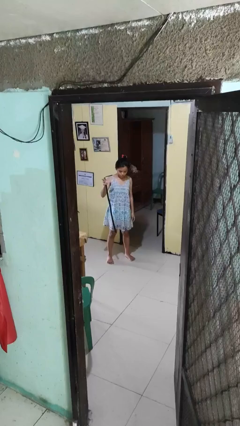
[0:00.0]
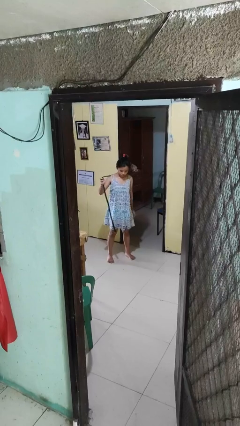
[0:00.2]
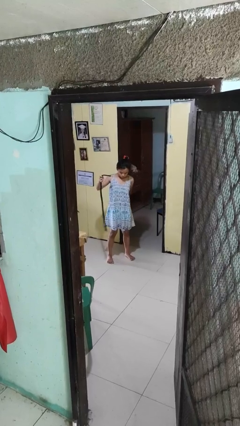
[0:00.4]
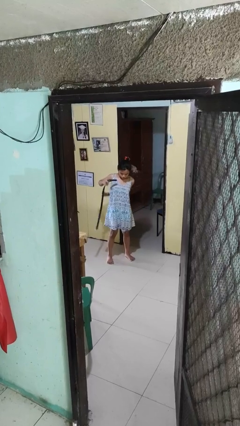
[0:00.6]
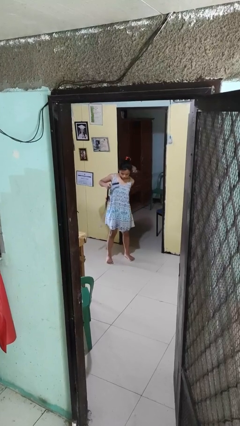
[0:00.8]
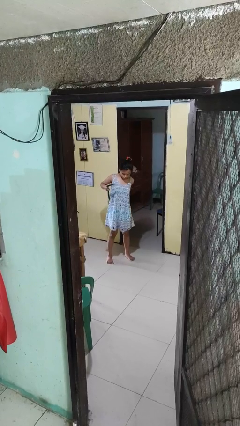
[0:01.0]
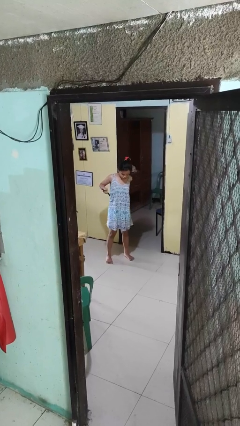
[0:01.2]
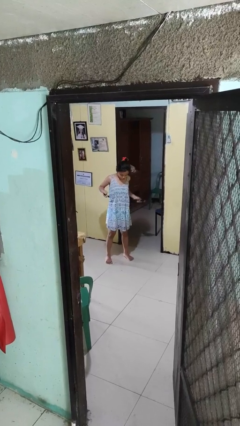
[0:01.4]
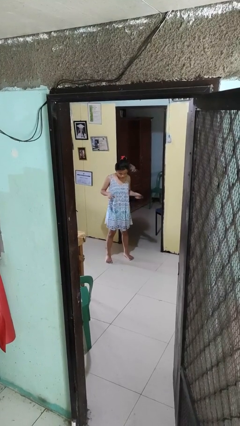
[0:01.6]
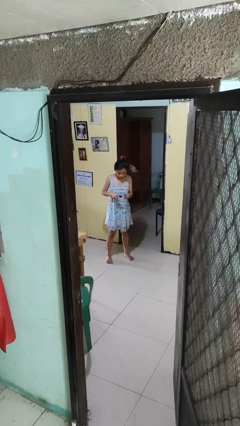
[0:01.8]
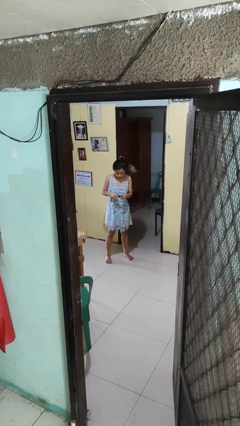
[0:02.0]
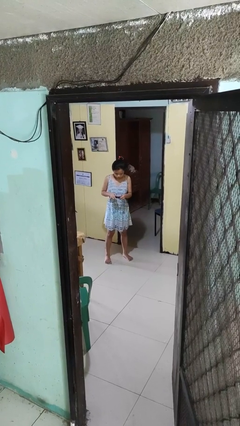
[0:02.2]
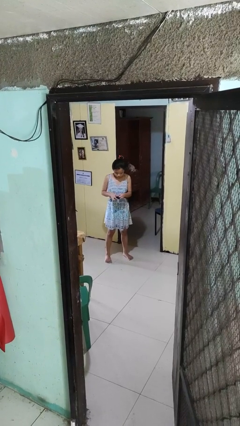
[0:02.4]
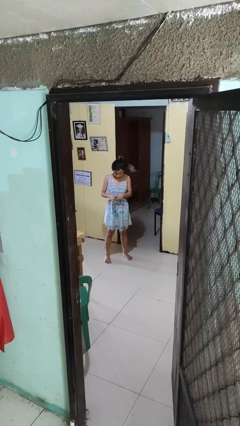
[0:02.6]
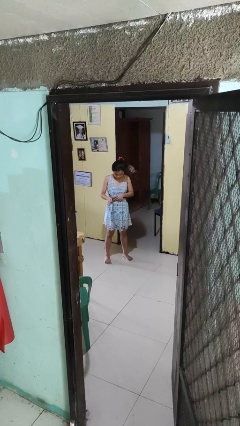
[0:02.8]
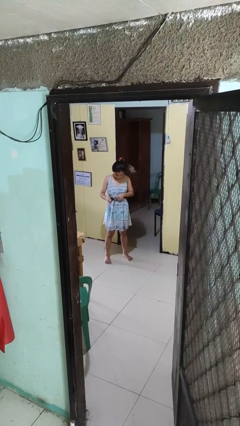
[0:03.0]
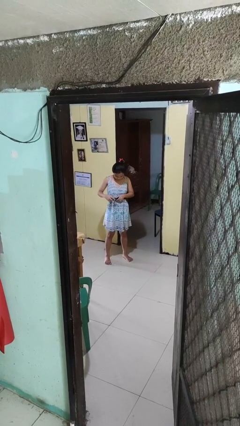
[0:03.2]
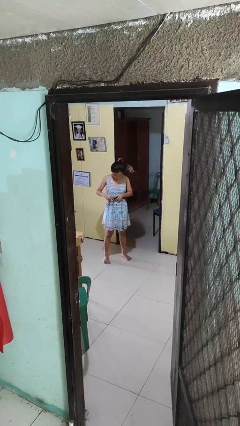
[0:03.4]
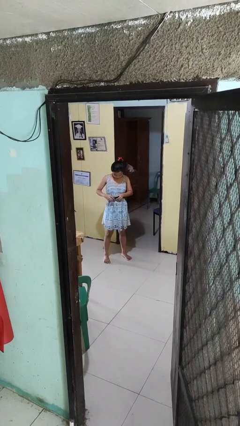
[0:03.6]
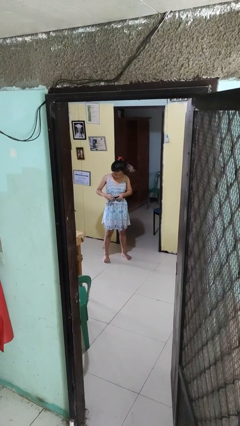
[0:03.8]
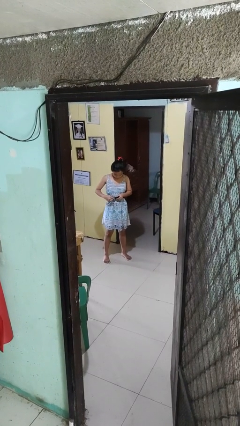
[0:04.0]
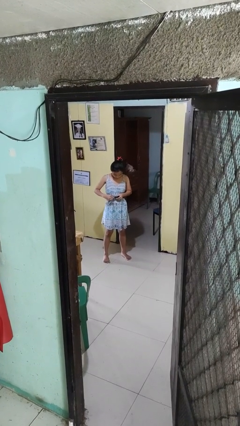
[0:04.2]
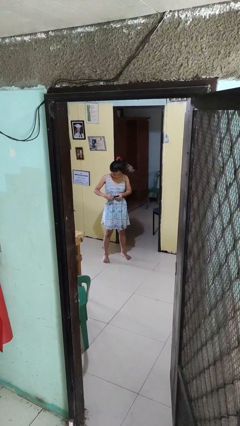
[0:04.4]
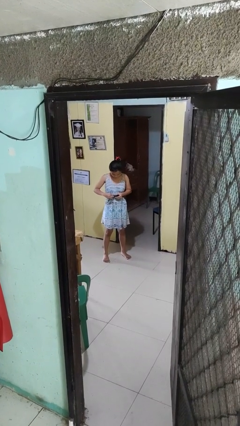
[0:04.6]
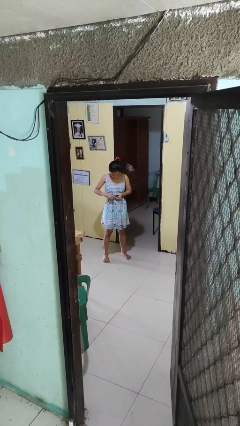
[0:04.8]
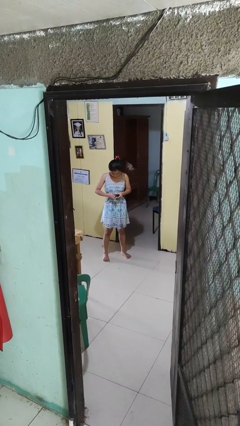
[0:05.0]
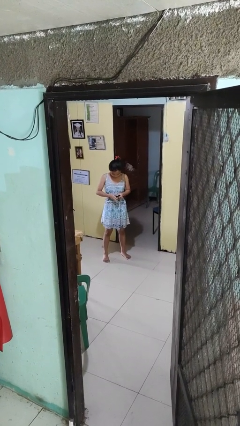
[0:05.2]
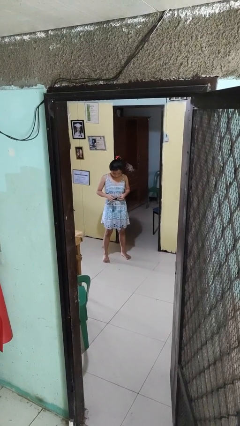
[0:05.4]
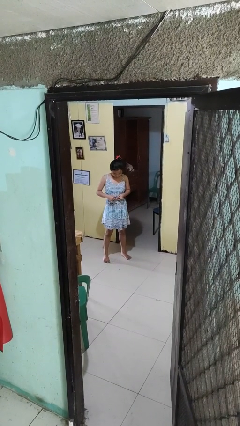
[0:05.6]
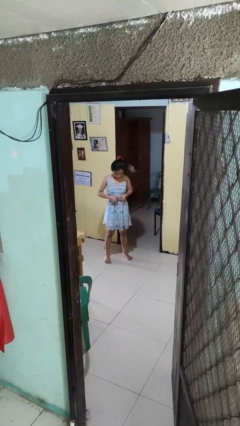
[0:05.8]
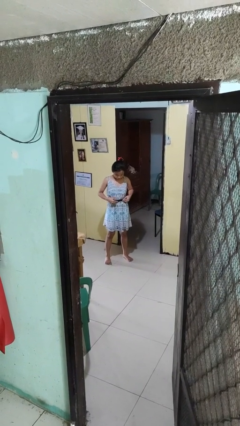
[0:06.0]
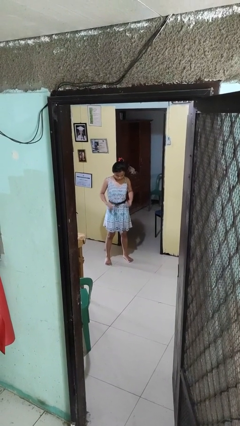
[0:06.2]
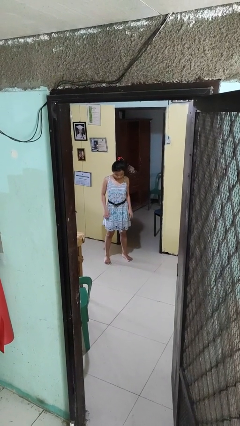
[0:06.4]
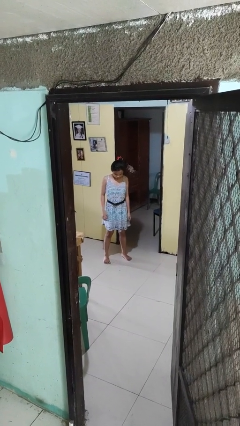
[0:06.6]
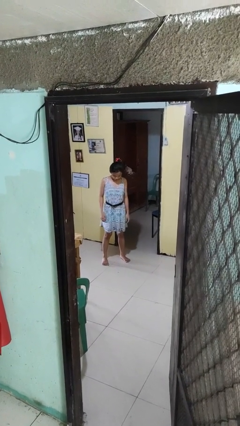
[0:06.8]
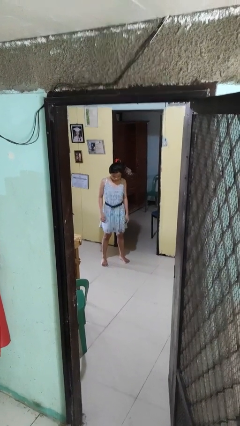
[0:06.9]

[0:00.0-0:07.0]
person puts on belt

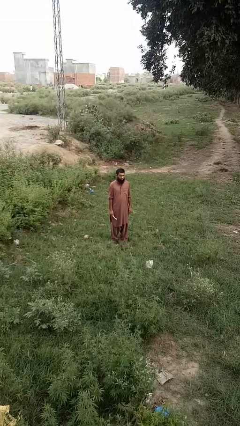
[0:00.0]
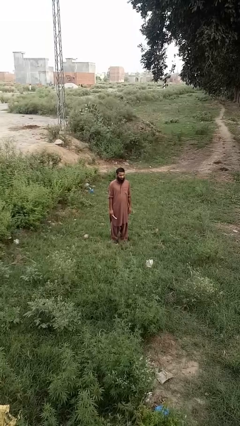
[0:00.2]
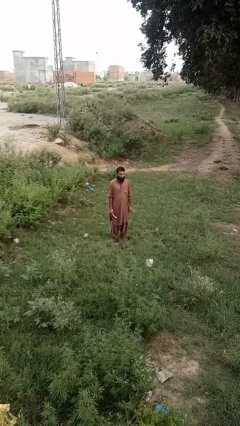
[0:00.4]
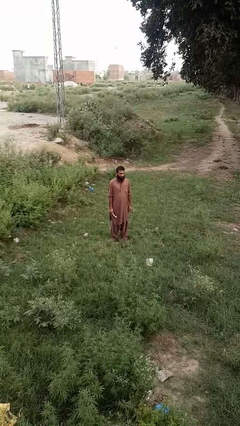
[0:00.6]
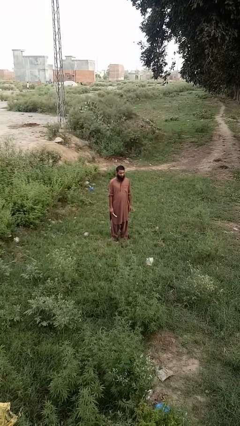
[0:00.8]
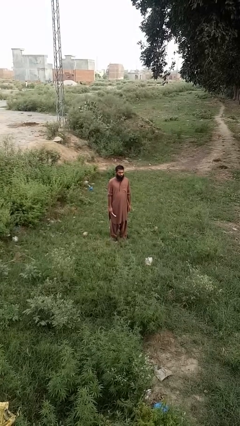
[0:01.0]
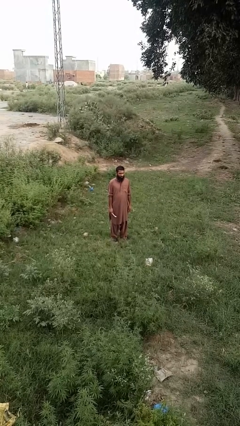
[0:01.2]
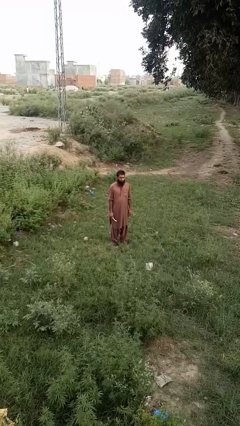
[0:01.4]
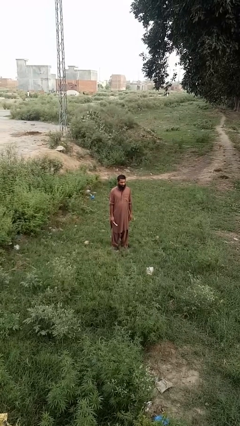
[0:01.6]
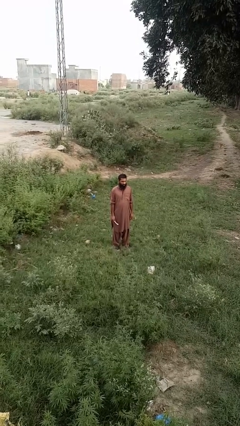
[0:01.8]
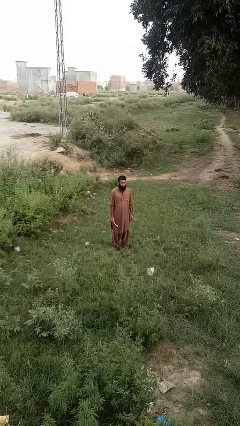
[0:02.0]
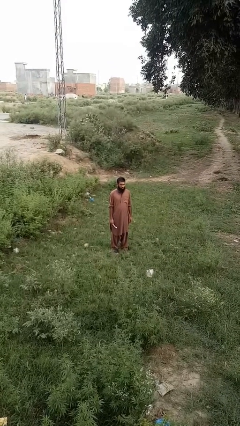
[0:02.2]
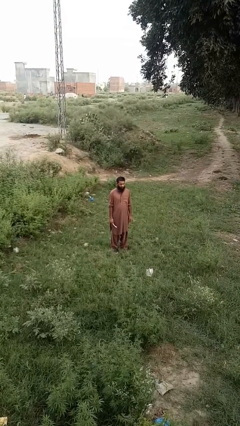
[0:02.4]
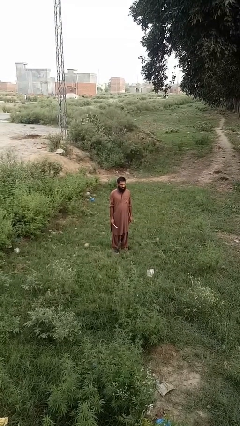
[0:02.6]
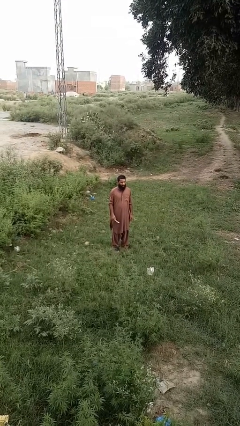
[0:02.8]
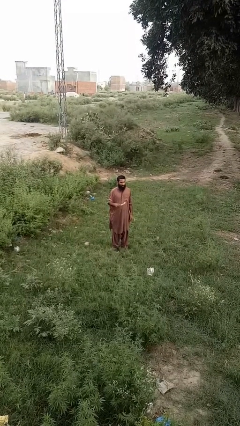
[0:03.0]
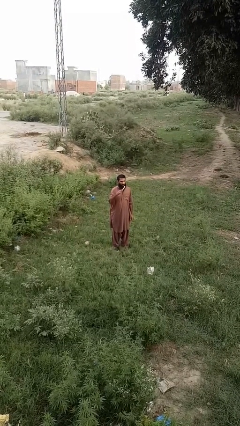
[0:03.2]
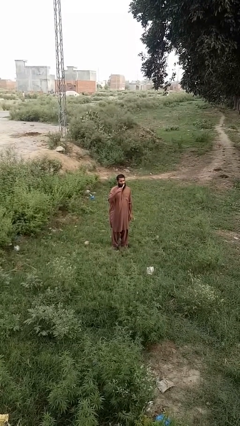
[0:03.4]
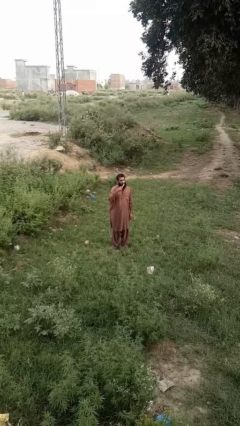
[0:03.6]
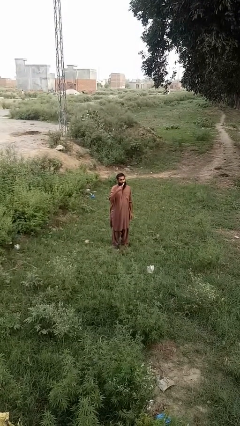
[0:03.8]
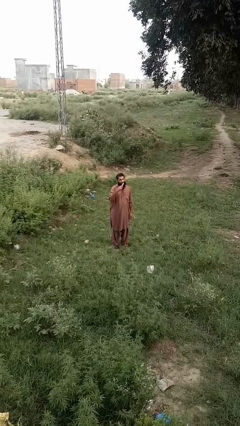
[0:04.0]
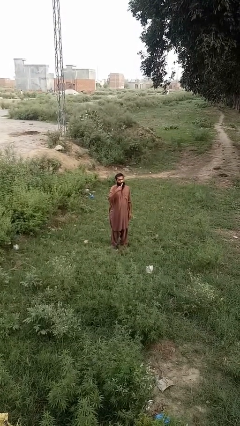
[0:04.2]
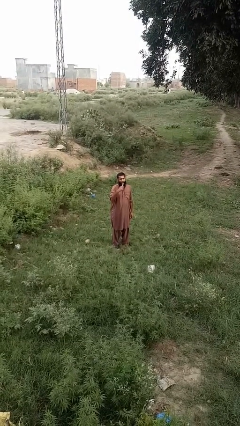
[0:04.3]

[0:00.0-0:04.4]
person brushes teeth

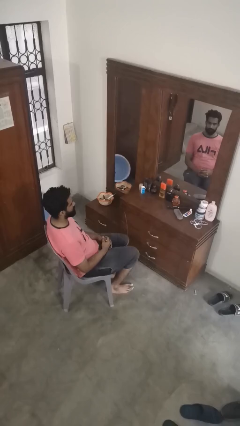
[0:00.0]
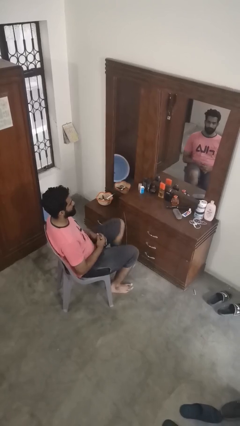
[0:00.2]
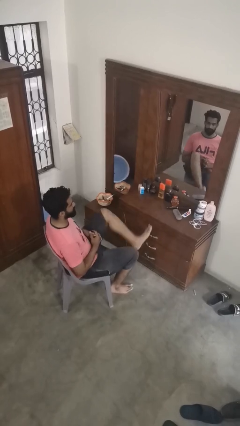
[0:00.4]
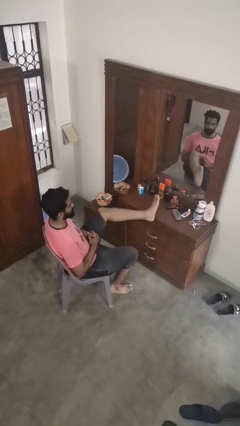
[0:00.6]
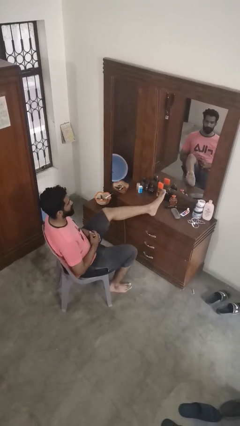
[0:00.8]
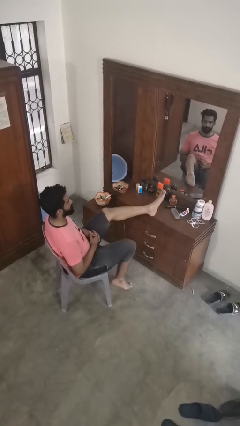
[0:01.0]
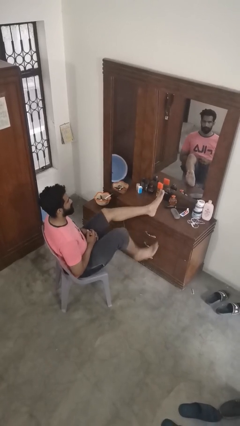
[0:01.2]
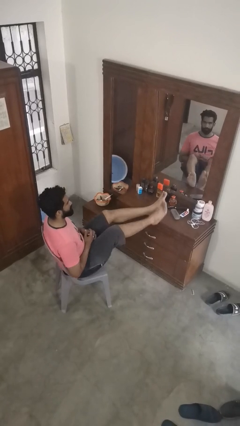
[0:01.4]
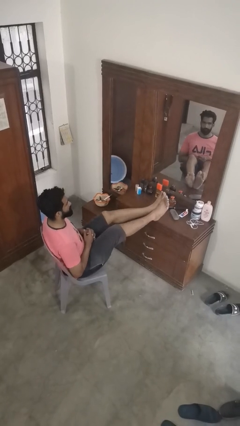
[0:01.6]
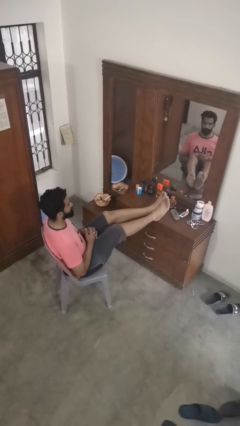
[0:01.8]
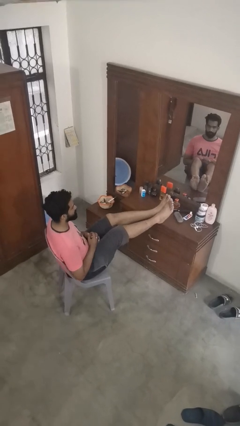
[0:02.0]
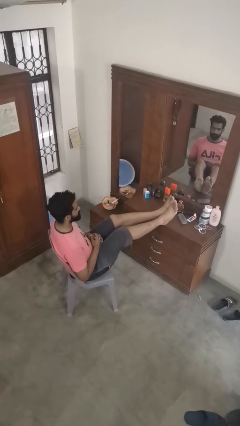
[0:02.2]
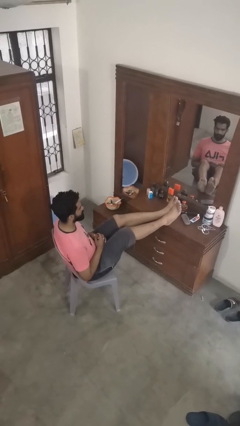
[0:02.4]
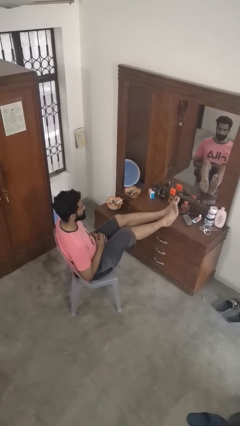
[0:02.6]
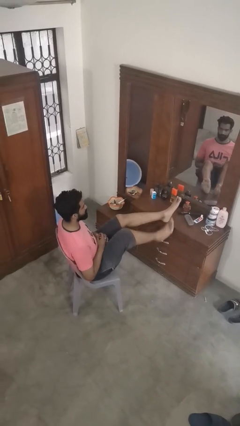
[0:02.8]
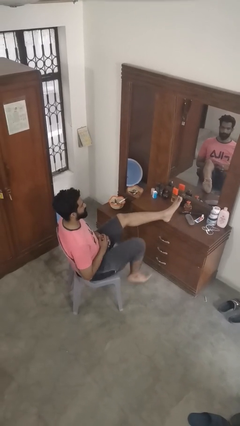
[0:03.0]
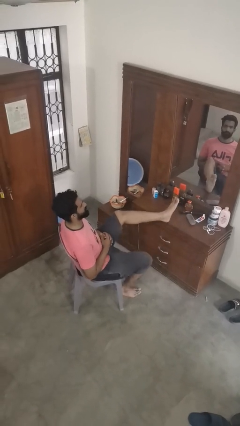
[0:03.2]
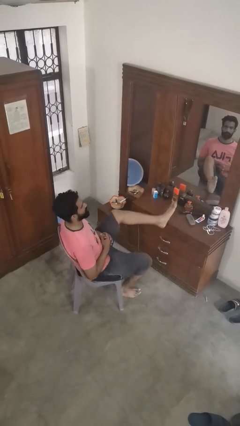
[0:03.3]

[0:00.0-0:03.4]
person puts feet up

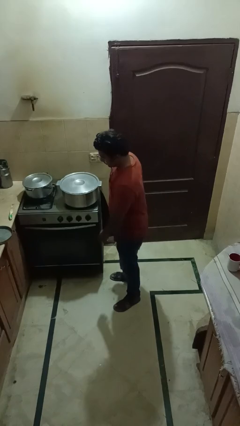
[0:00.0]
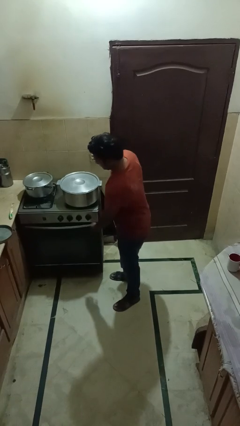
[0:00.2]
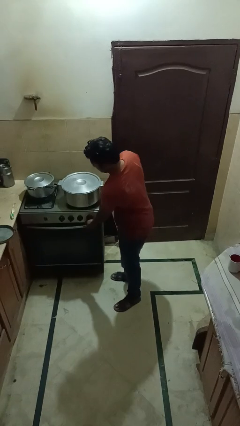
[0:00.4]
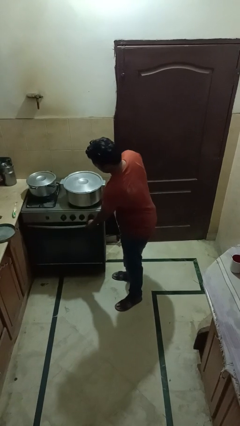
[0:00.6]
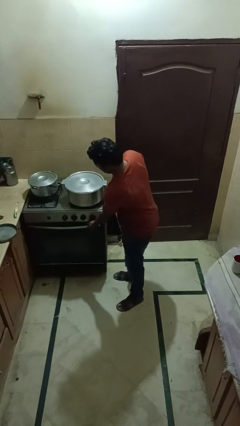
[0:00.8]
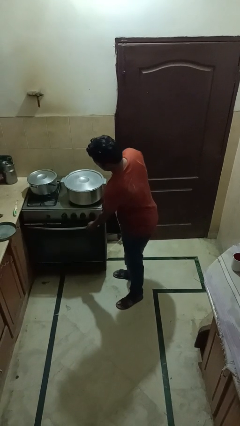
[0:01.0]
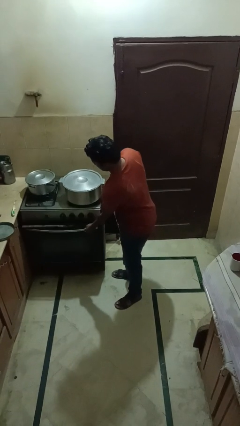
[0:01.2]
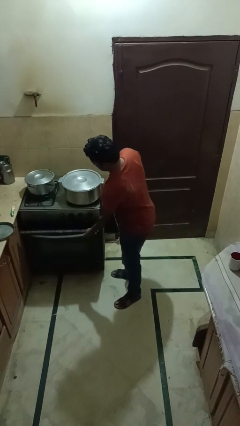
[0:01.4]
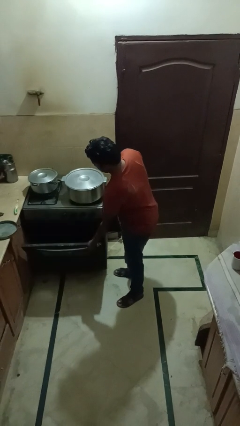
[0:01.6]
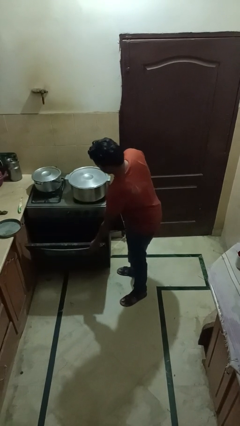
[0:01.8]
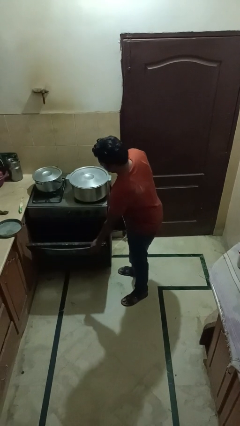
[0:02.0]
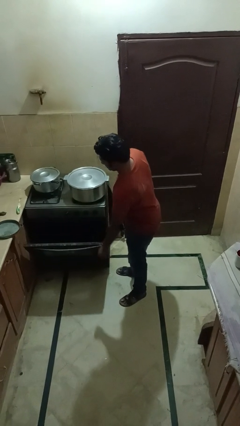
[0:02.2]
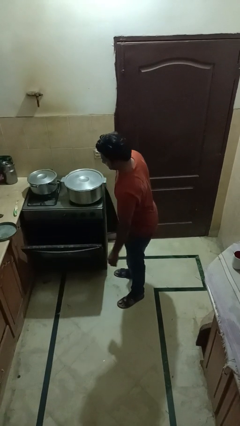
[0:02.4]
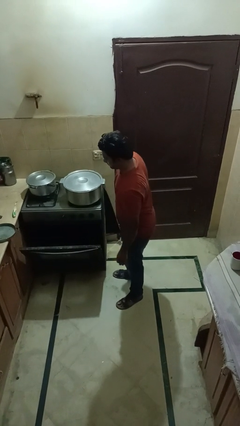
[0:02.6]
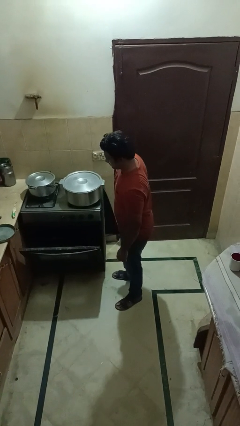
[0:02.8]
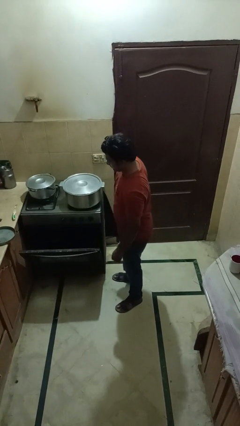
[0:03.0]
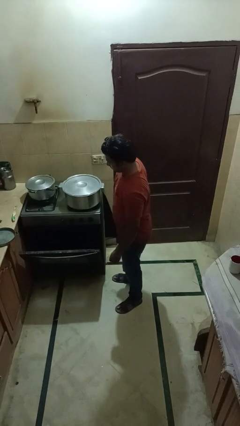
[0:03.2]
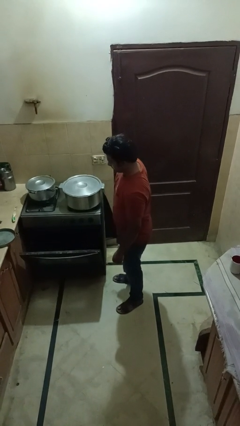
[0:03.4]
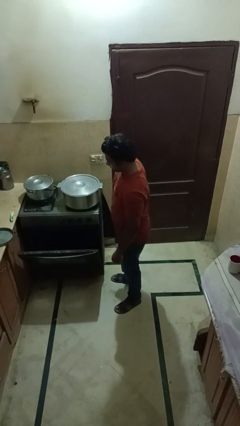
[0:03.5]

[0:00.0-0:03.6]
person opens oven door
